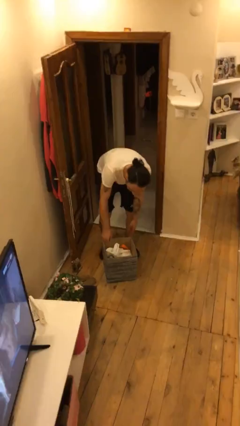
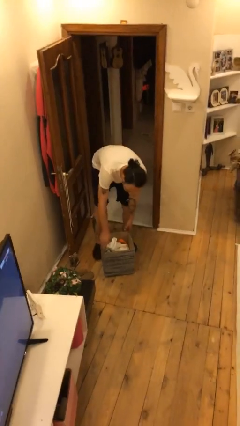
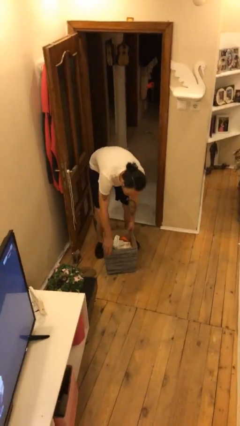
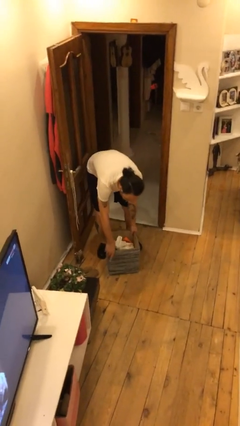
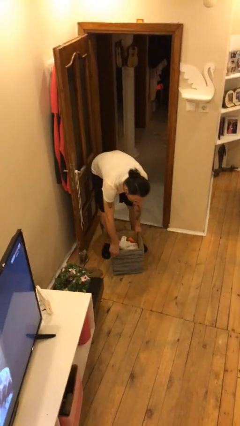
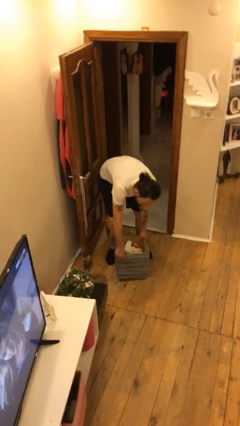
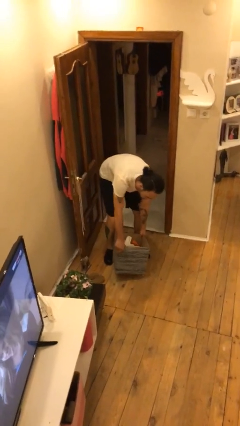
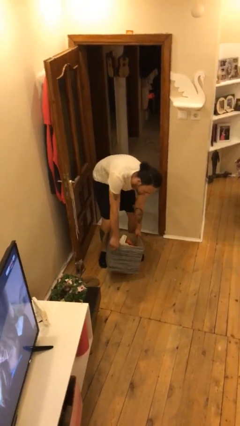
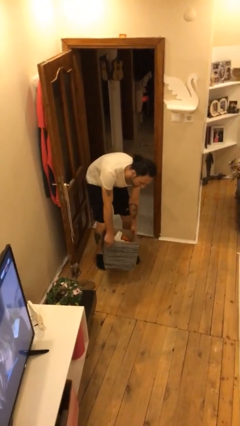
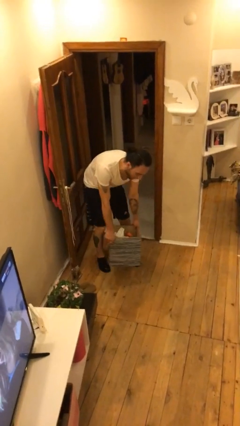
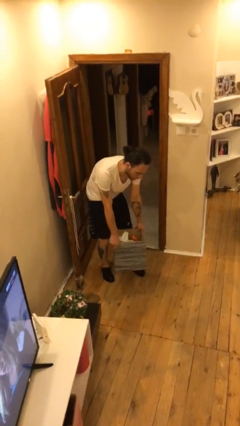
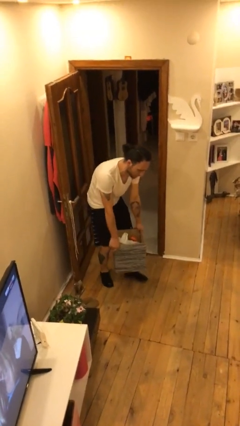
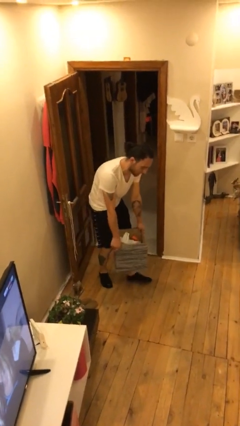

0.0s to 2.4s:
person picks up object from floor

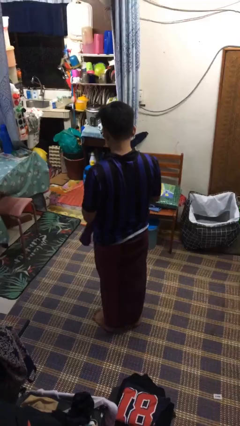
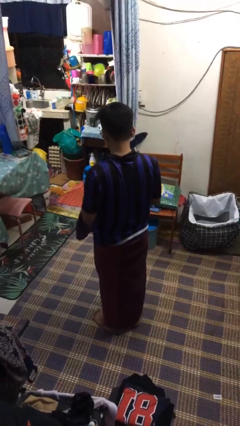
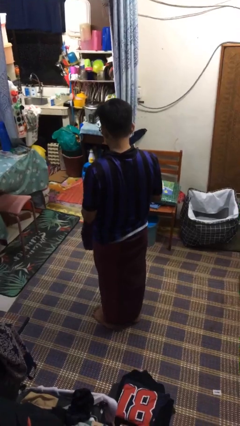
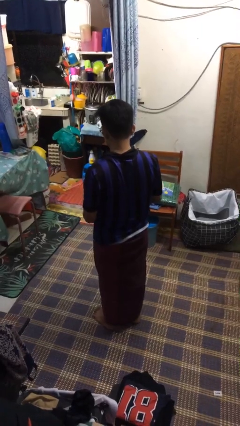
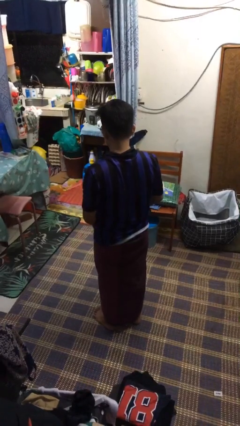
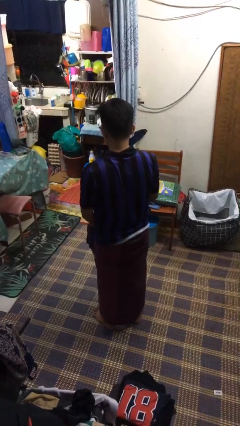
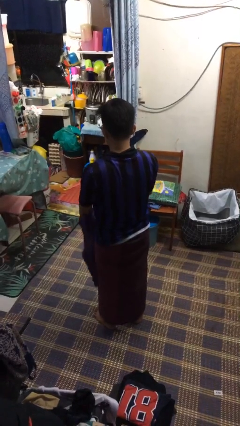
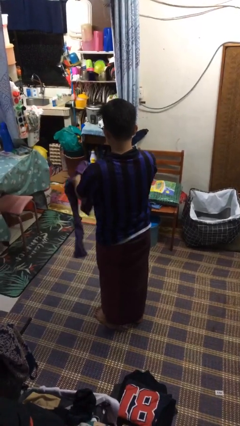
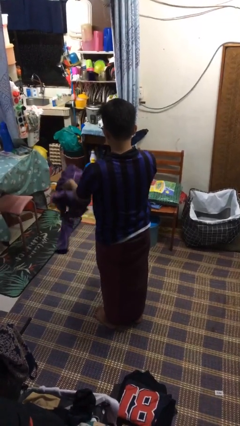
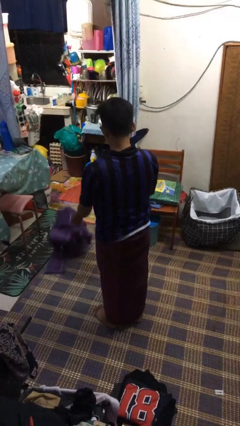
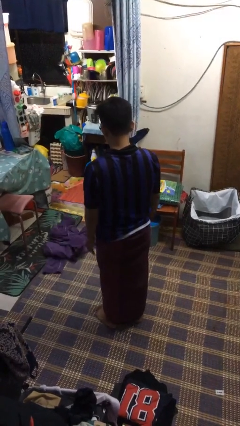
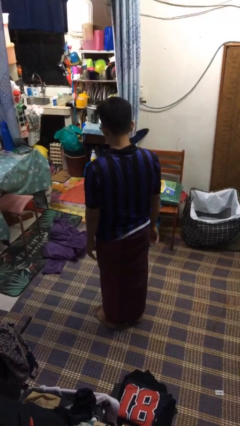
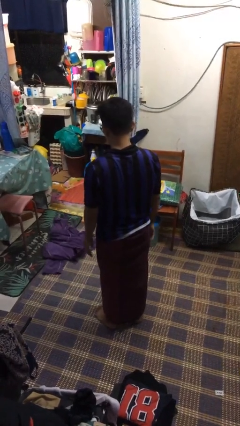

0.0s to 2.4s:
person throws object to ground

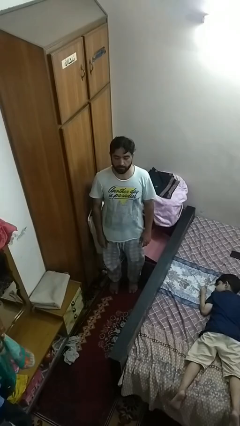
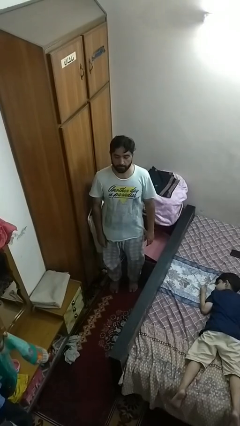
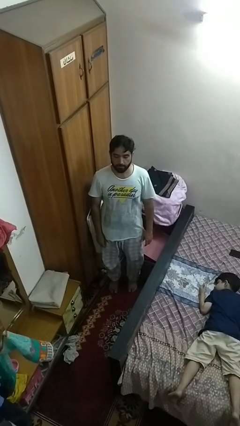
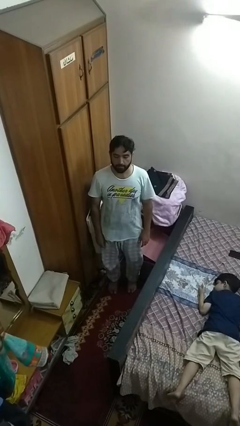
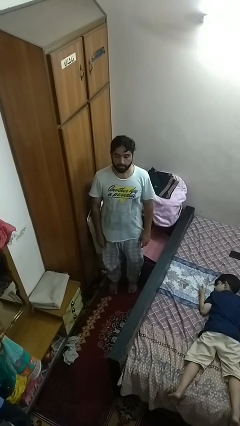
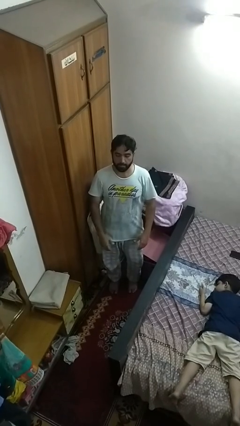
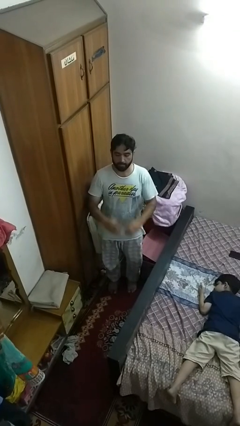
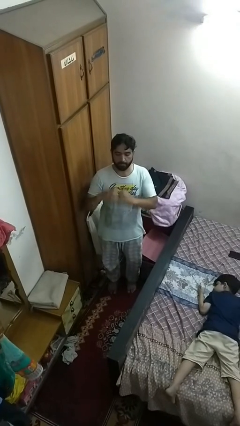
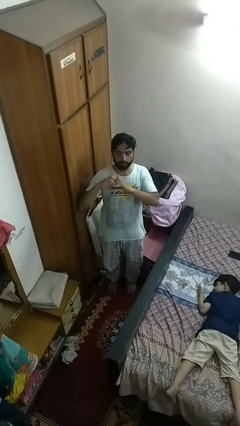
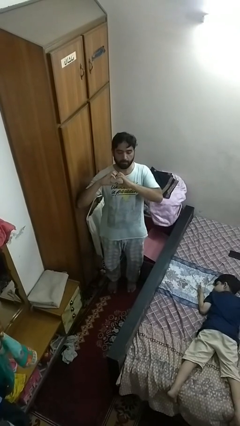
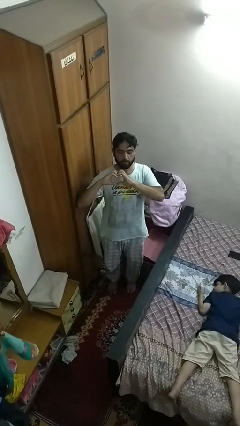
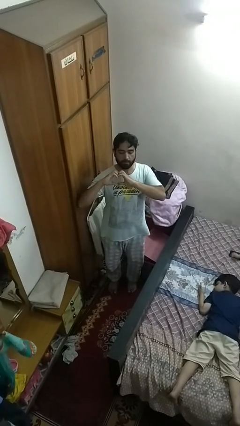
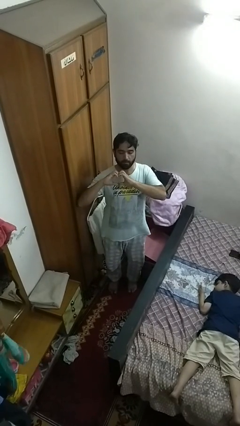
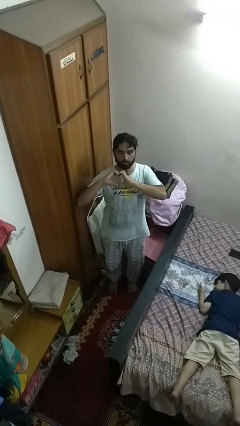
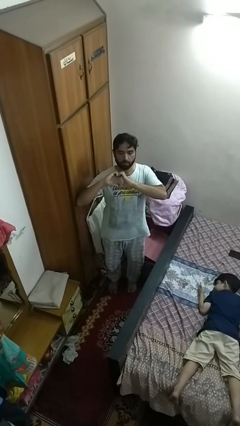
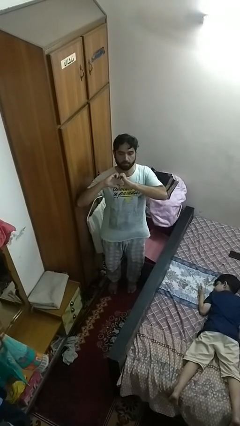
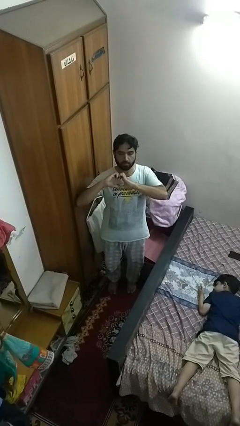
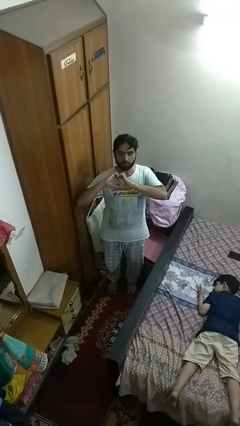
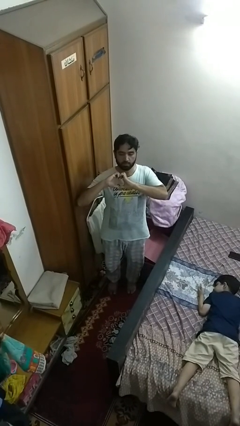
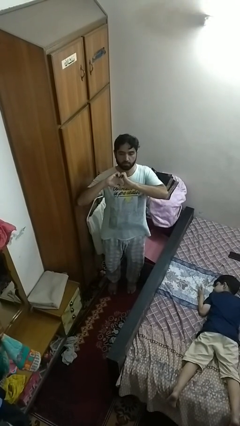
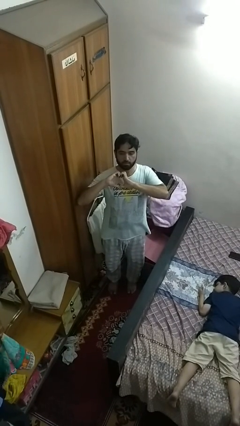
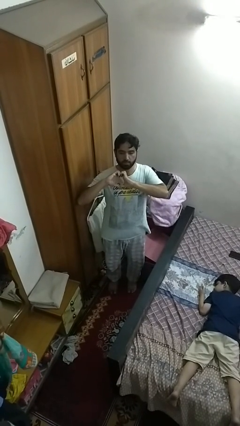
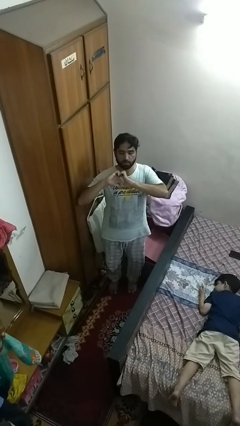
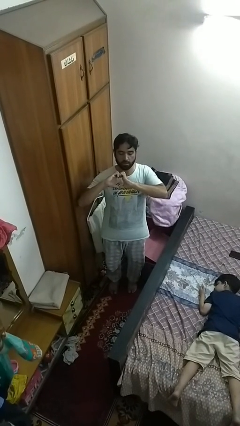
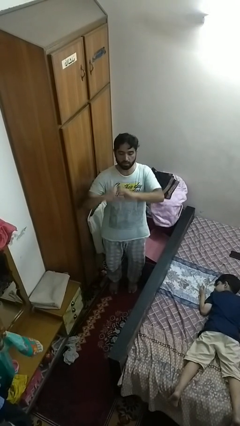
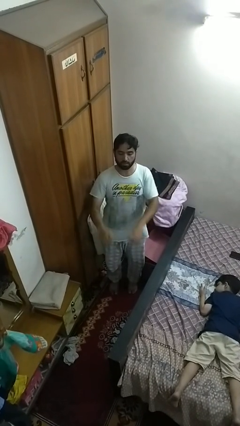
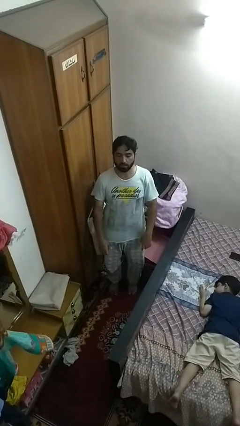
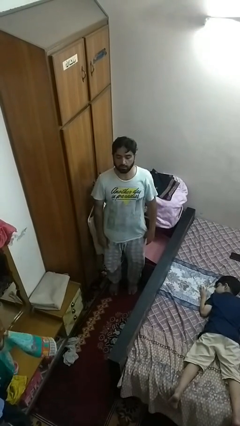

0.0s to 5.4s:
person gestures heart

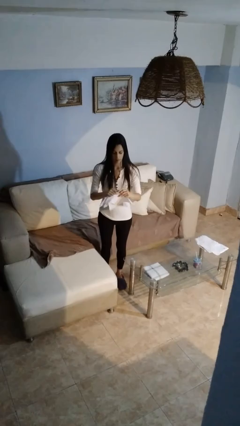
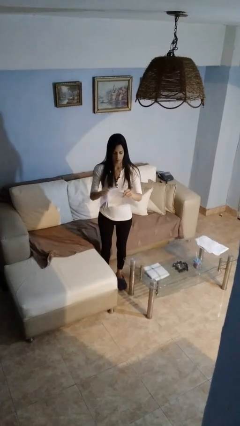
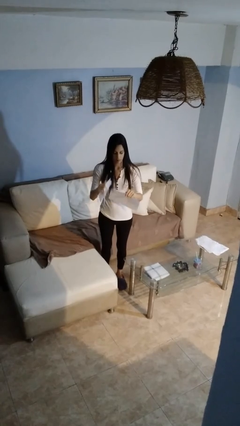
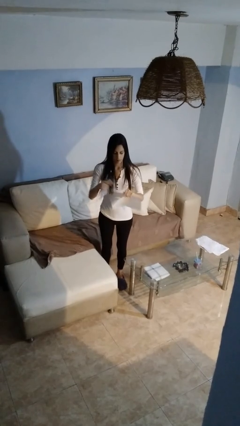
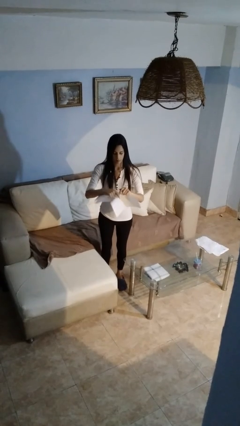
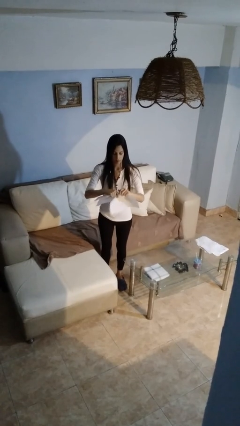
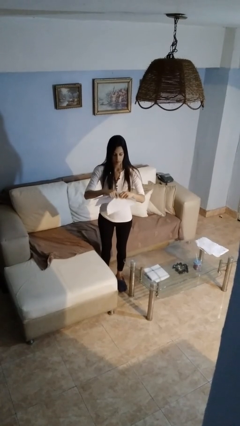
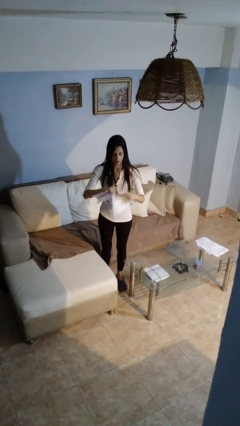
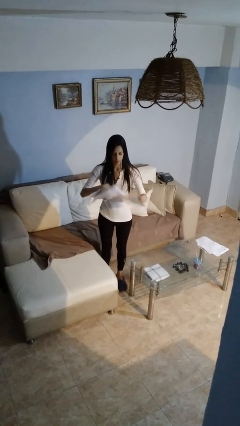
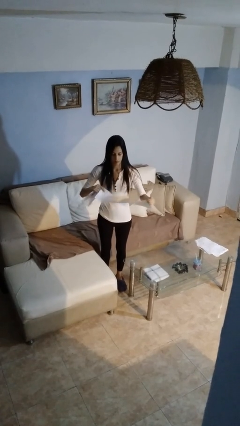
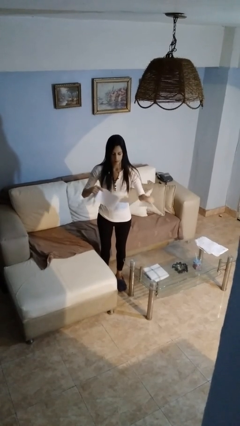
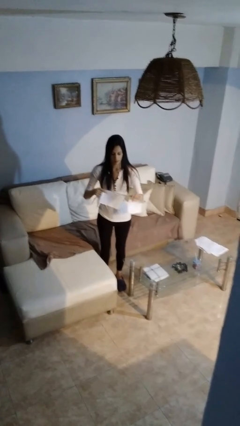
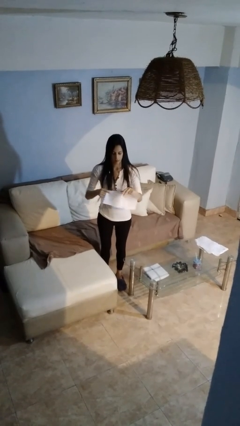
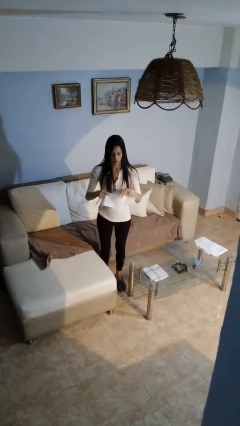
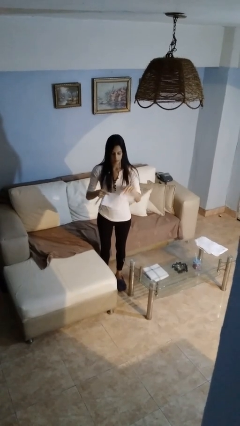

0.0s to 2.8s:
person tears paper

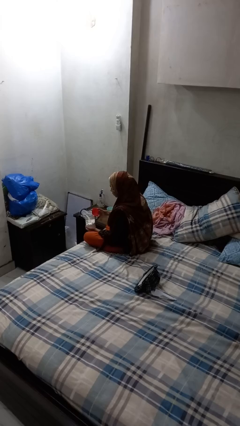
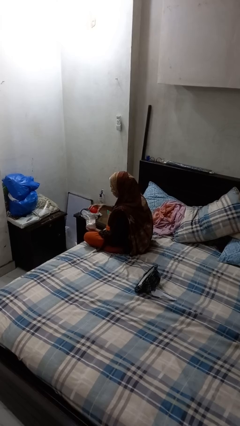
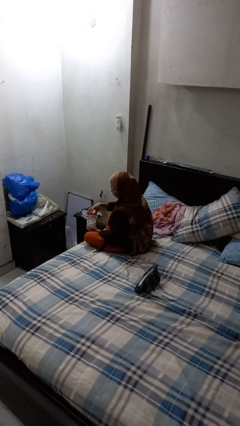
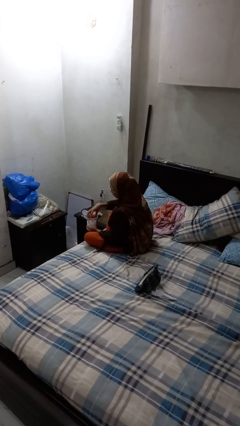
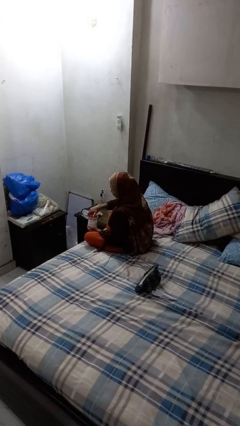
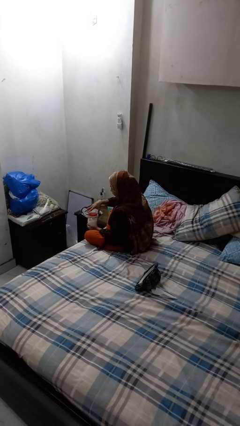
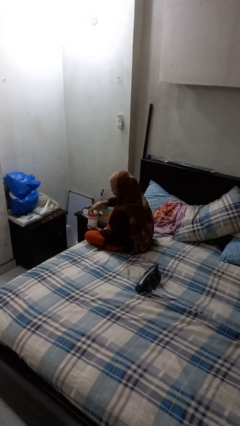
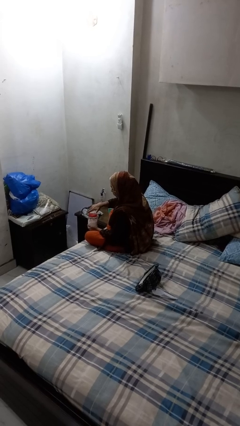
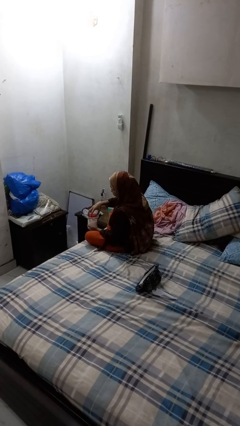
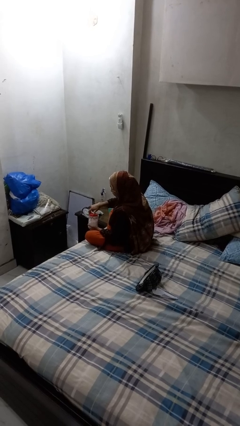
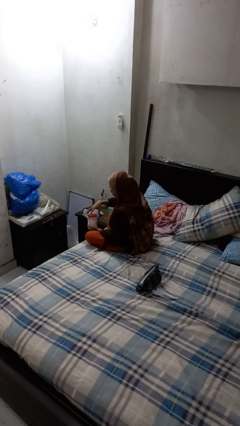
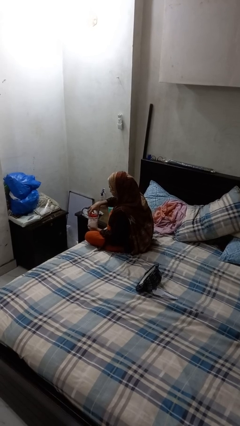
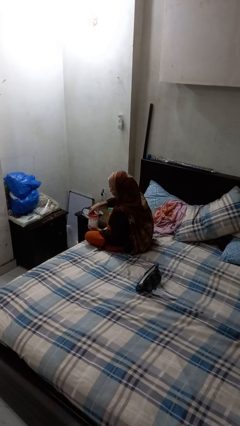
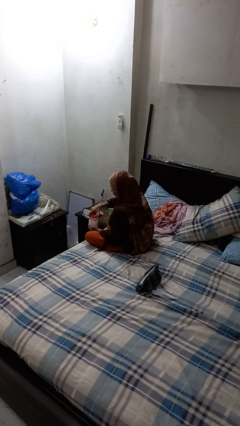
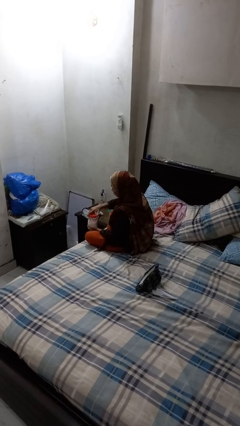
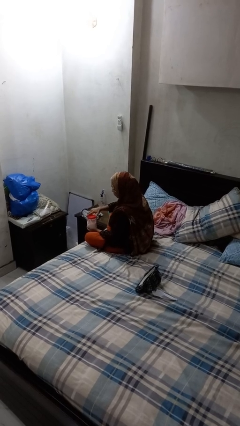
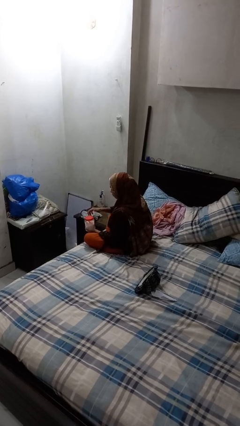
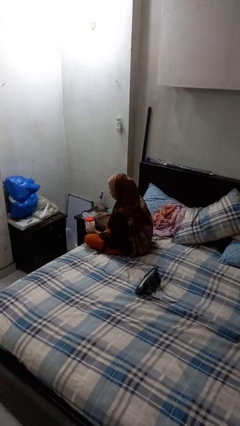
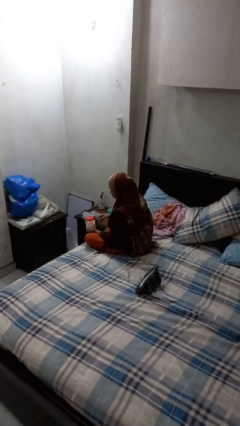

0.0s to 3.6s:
person closes jar

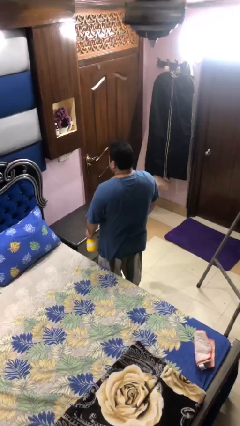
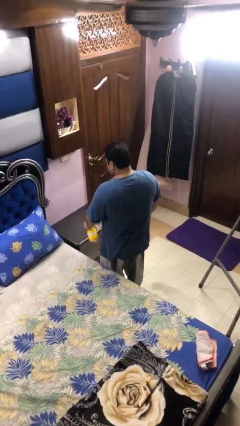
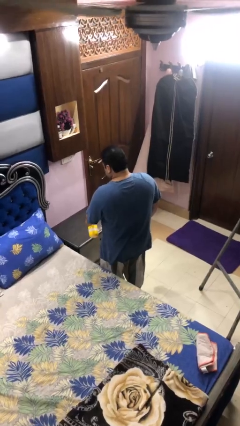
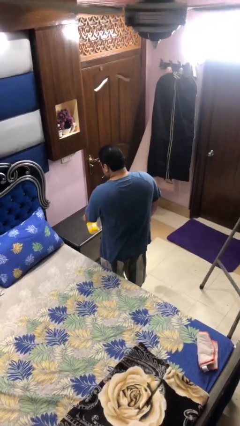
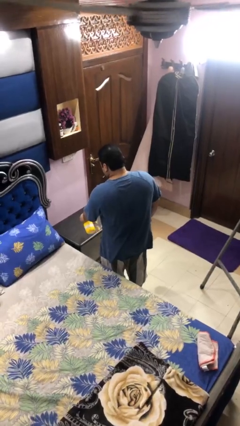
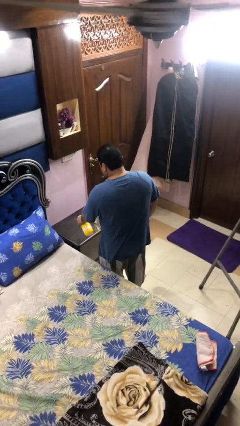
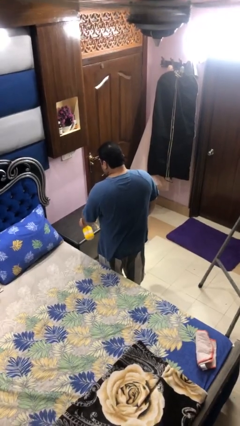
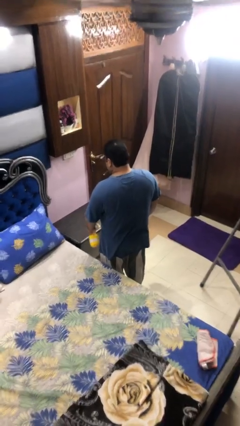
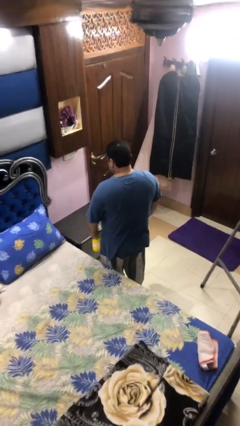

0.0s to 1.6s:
person sprays from bottle
